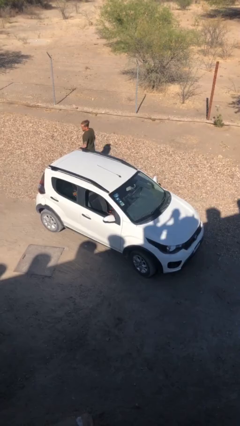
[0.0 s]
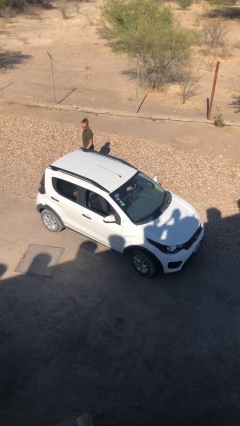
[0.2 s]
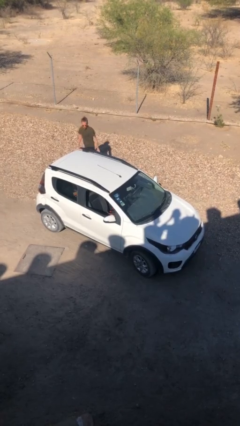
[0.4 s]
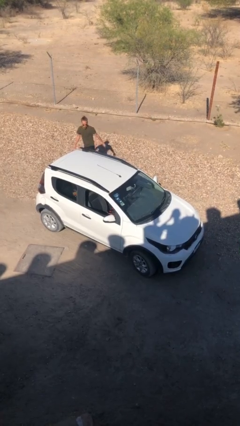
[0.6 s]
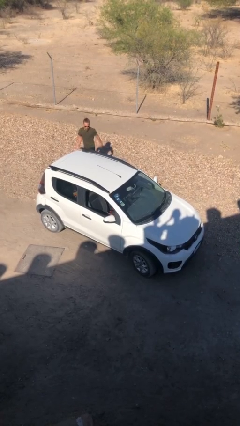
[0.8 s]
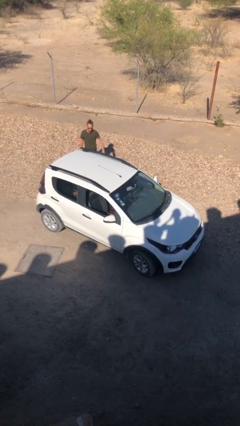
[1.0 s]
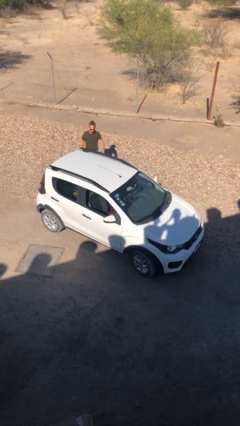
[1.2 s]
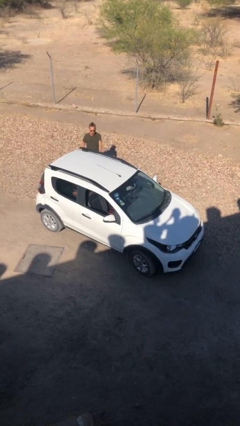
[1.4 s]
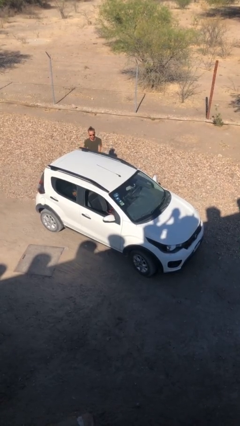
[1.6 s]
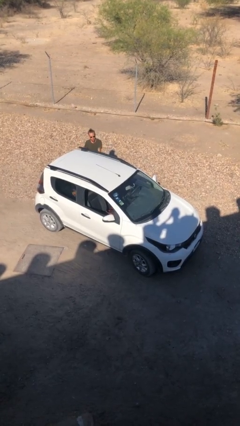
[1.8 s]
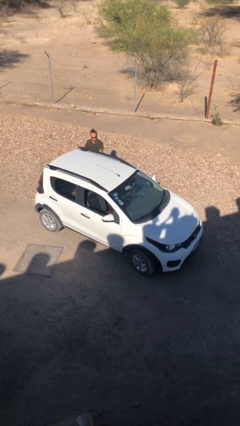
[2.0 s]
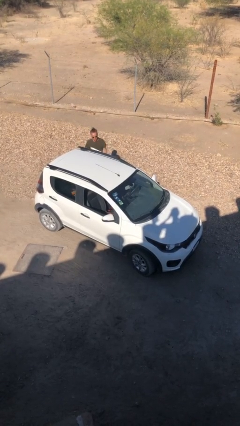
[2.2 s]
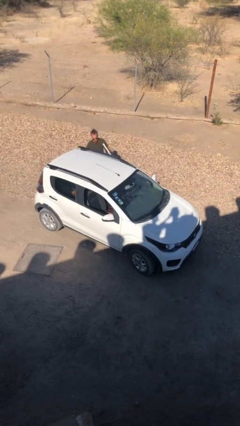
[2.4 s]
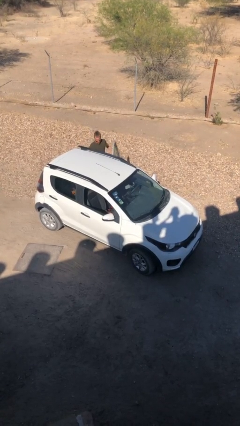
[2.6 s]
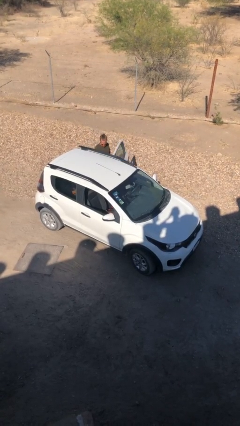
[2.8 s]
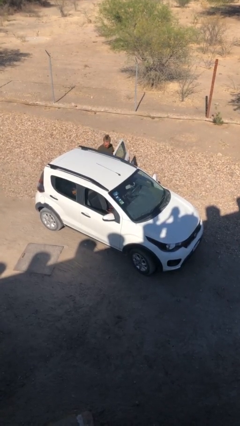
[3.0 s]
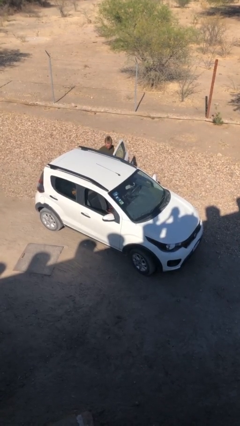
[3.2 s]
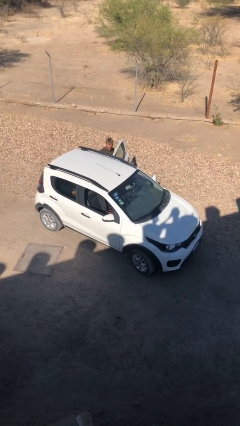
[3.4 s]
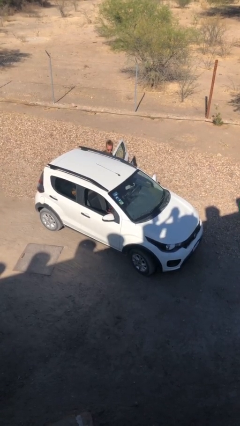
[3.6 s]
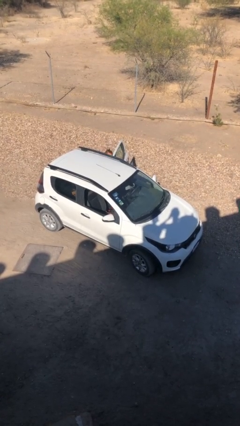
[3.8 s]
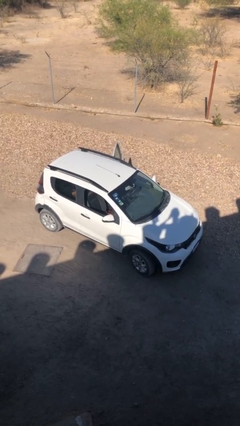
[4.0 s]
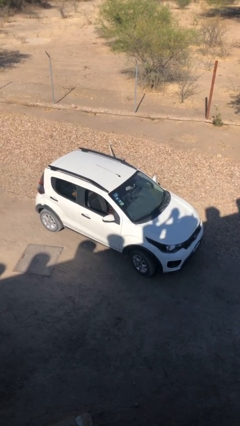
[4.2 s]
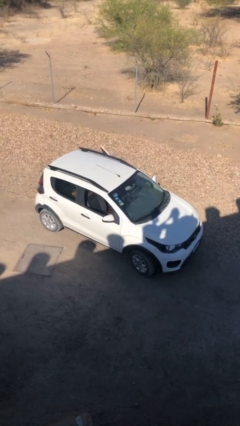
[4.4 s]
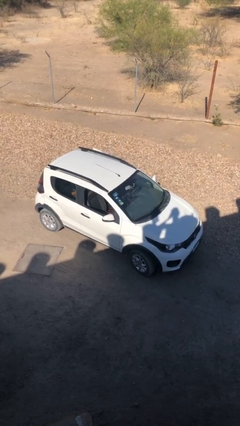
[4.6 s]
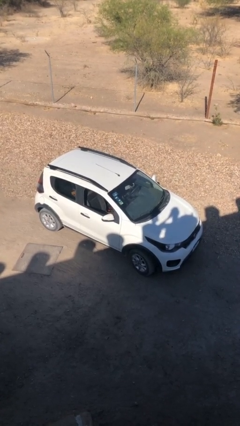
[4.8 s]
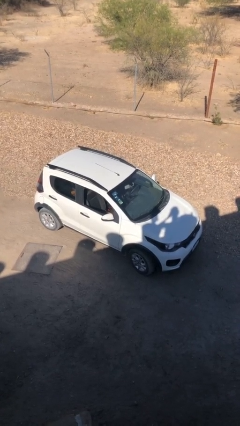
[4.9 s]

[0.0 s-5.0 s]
car picks up person

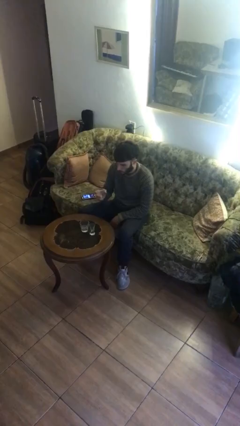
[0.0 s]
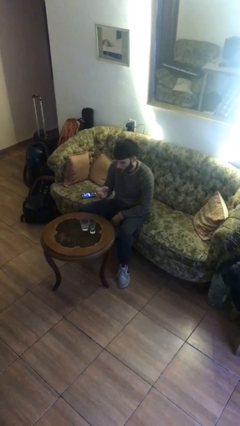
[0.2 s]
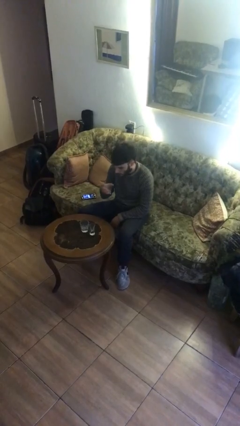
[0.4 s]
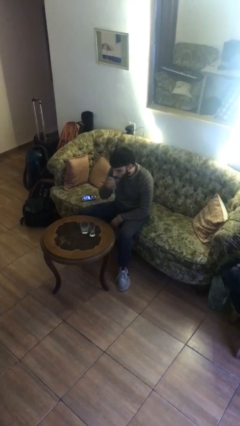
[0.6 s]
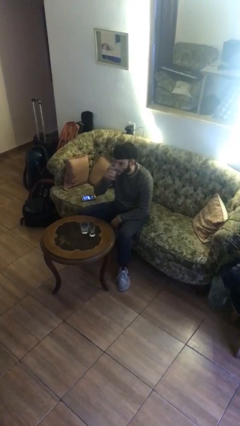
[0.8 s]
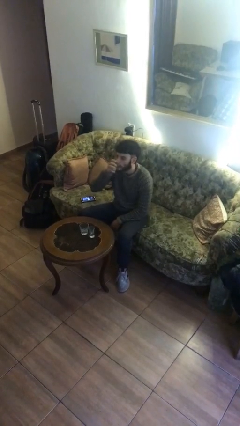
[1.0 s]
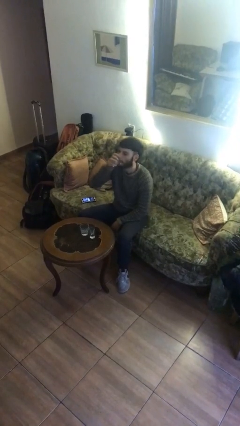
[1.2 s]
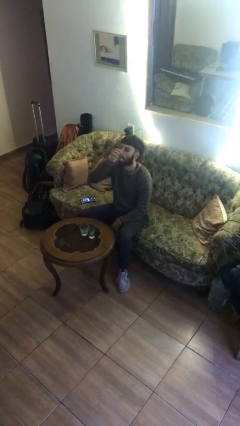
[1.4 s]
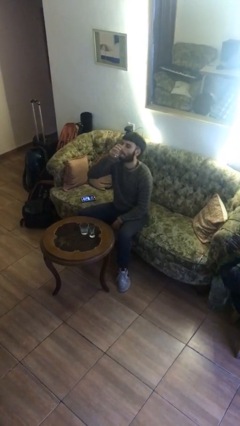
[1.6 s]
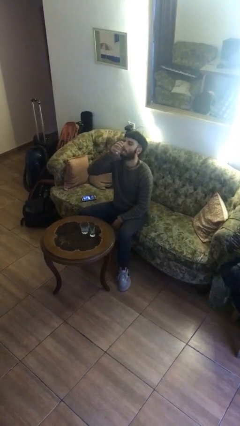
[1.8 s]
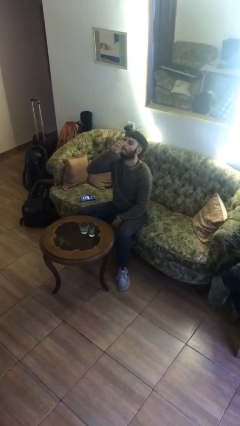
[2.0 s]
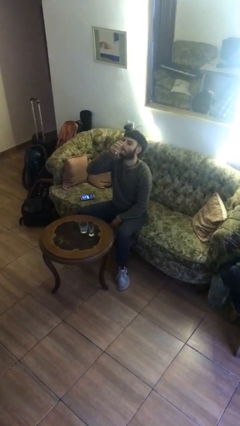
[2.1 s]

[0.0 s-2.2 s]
person drinks from shotglass

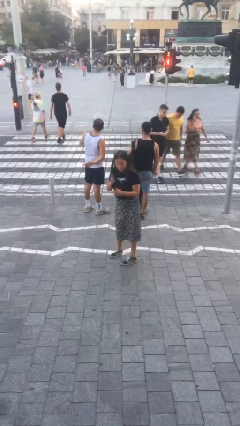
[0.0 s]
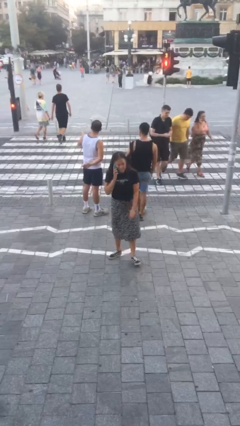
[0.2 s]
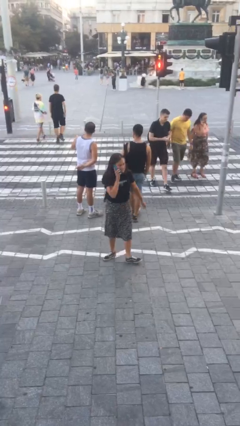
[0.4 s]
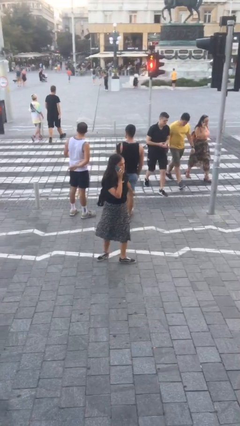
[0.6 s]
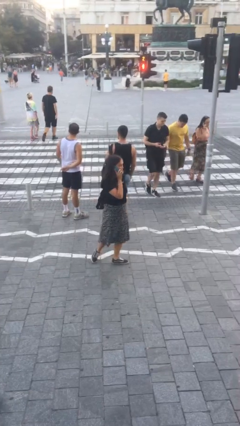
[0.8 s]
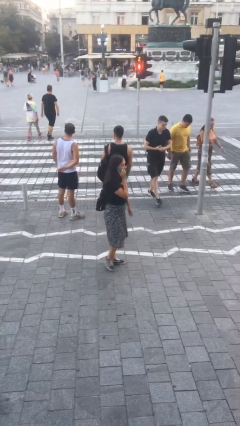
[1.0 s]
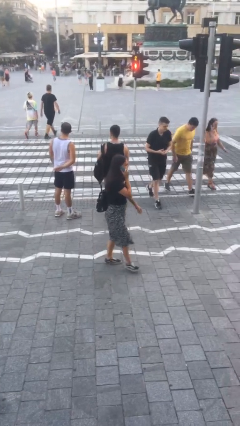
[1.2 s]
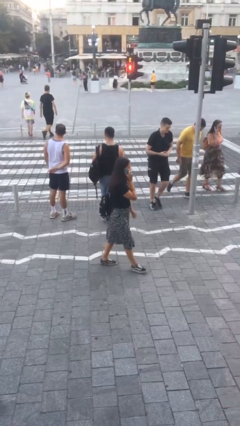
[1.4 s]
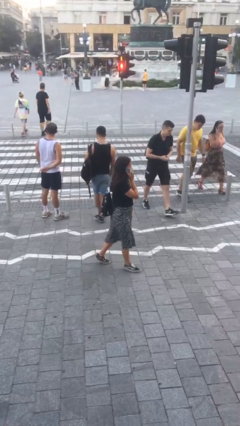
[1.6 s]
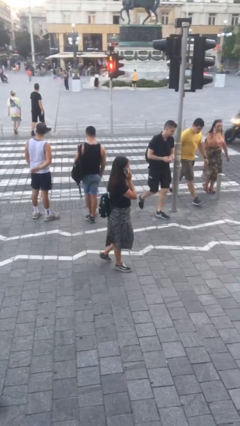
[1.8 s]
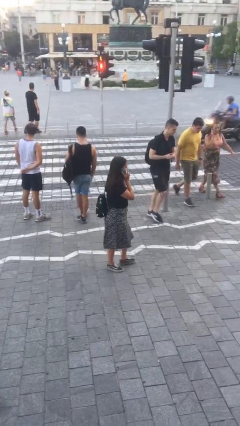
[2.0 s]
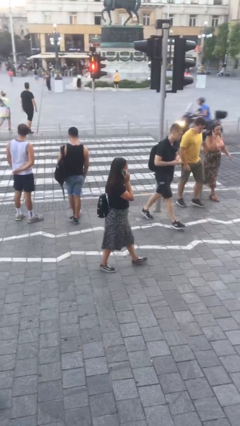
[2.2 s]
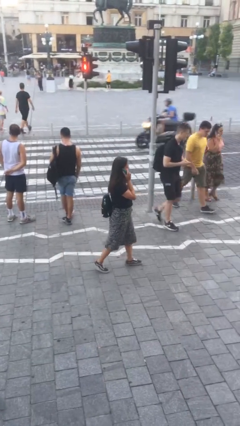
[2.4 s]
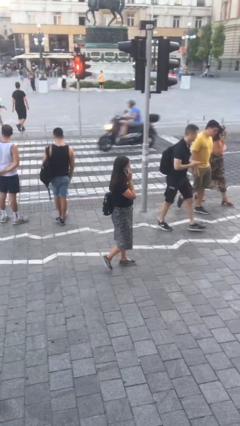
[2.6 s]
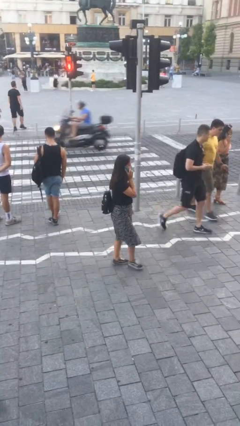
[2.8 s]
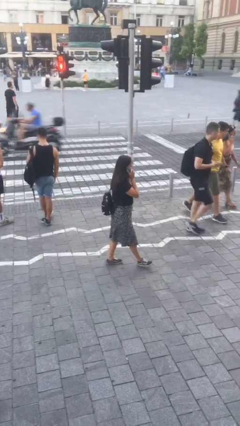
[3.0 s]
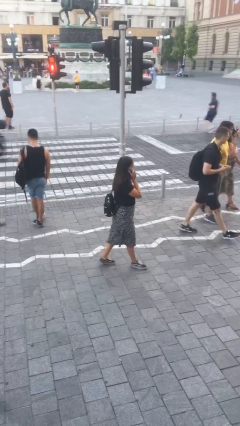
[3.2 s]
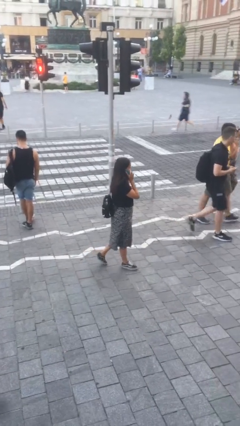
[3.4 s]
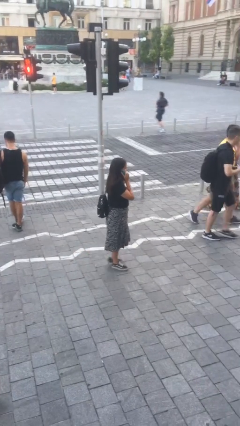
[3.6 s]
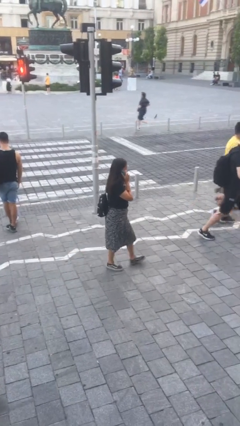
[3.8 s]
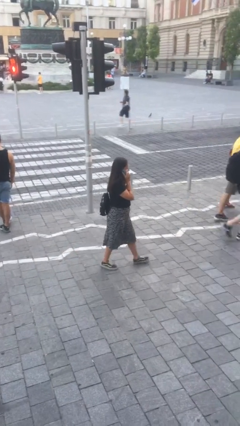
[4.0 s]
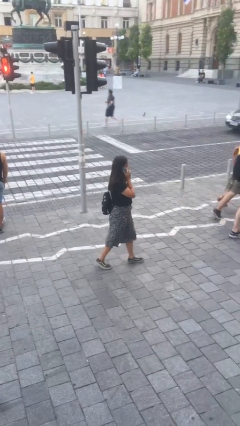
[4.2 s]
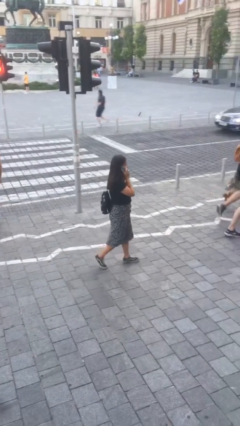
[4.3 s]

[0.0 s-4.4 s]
person talks on phone

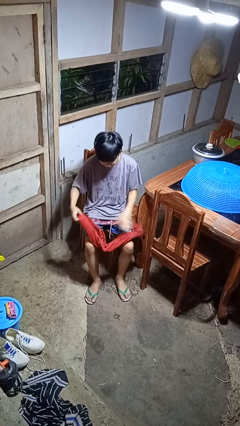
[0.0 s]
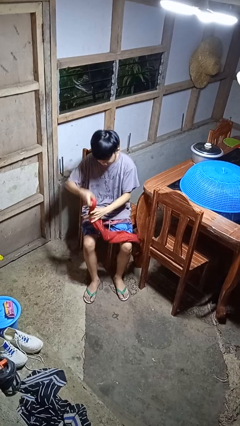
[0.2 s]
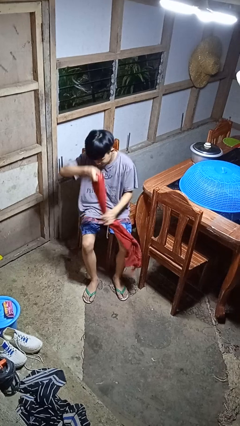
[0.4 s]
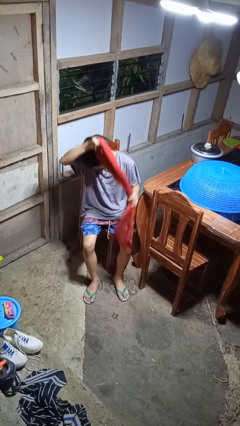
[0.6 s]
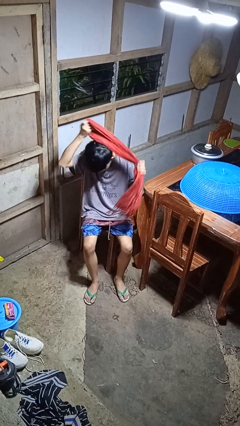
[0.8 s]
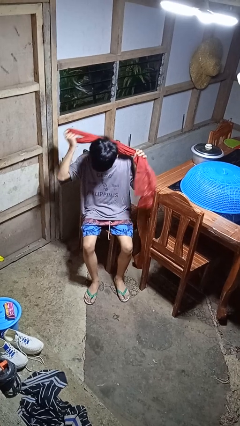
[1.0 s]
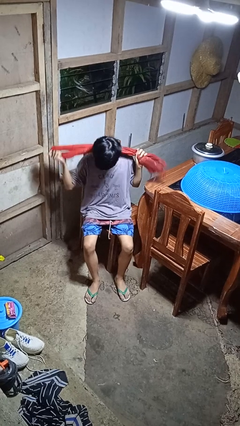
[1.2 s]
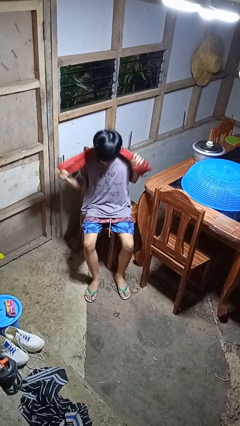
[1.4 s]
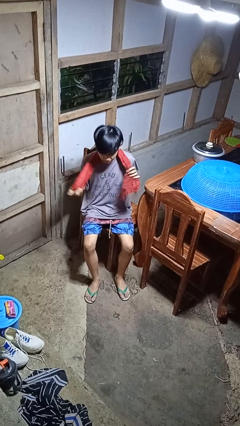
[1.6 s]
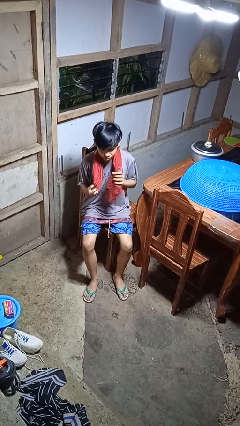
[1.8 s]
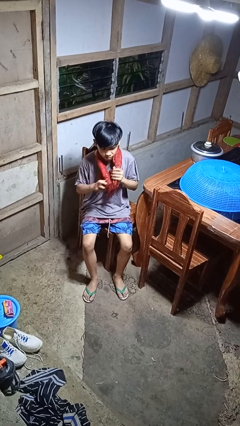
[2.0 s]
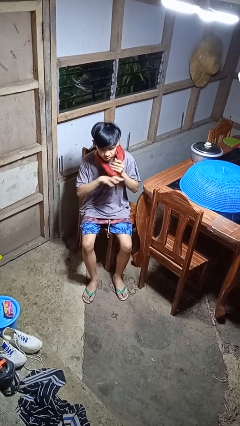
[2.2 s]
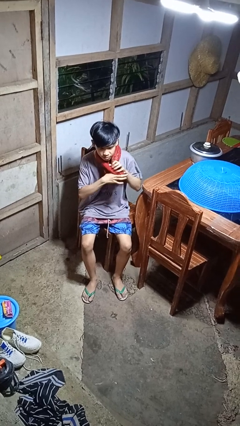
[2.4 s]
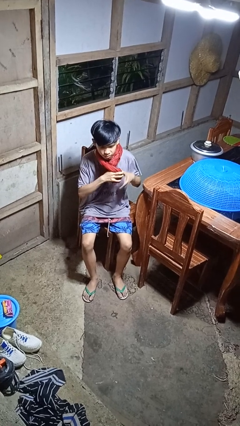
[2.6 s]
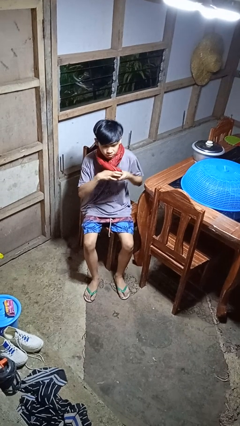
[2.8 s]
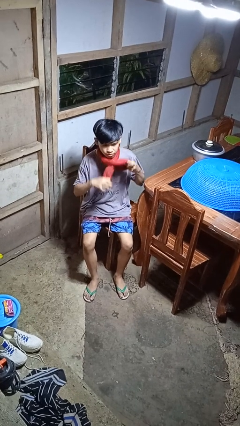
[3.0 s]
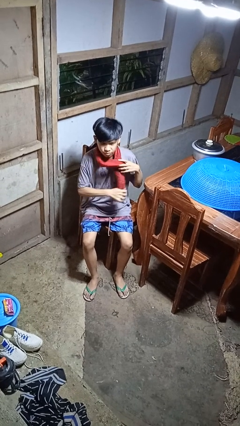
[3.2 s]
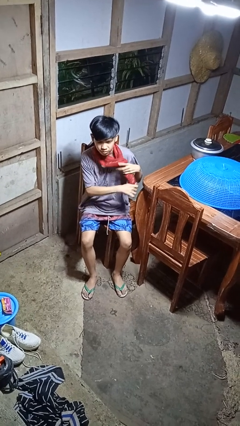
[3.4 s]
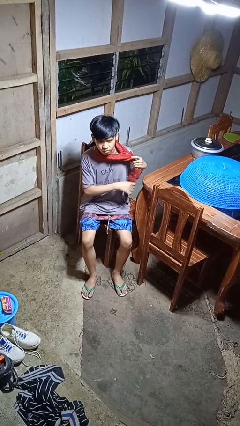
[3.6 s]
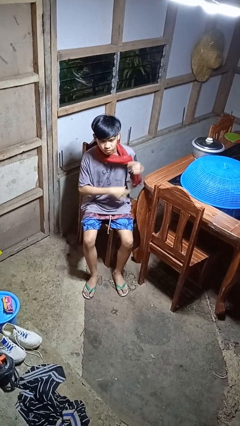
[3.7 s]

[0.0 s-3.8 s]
person puts on scarf

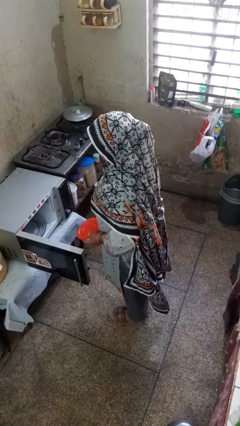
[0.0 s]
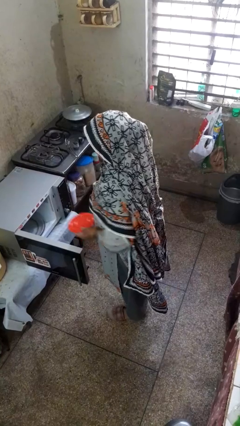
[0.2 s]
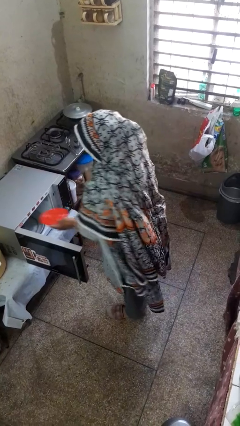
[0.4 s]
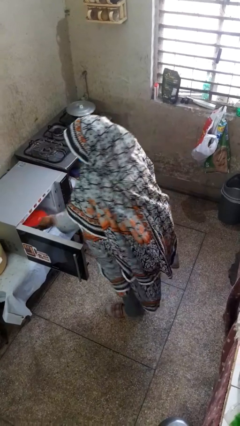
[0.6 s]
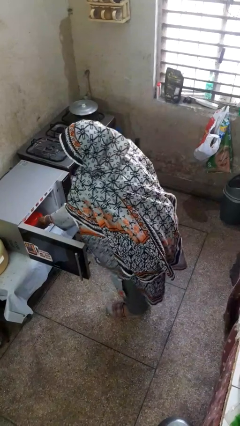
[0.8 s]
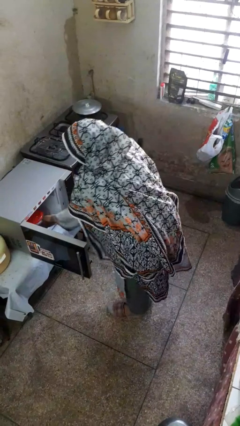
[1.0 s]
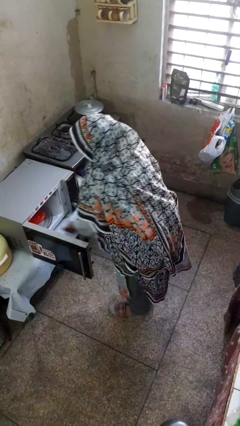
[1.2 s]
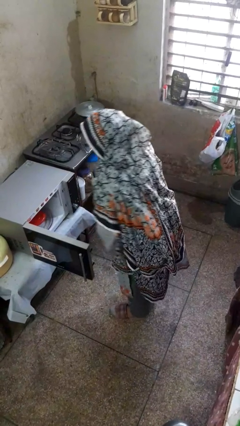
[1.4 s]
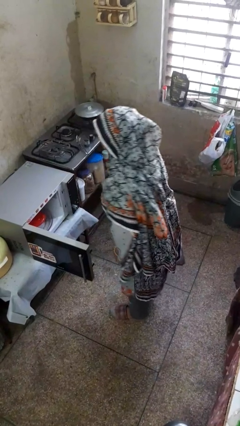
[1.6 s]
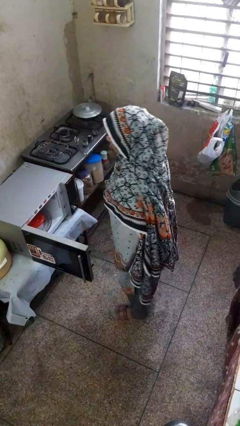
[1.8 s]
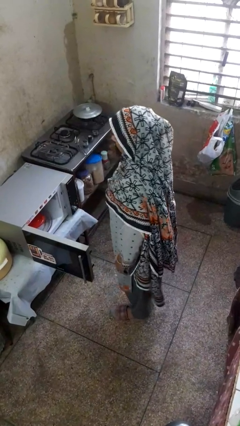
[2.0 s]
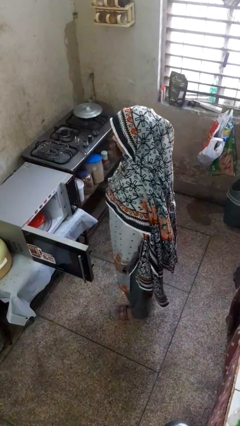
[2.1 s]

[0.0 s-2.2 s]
person puts object into microwave

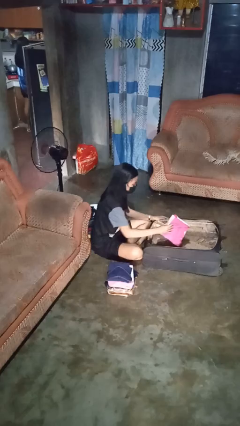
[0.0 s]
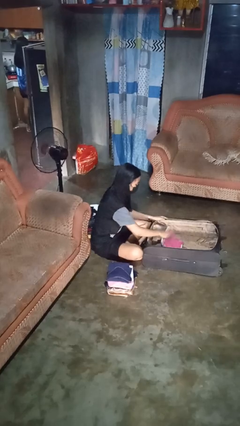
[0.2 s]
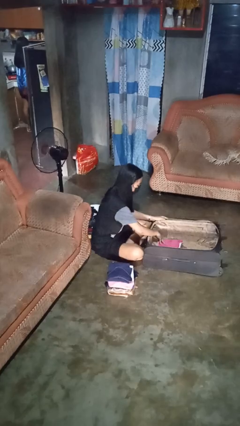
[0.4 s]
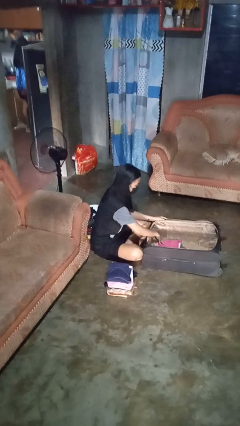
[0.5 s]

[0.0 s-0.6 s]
person loads clothes into suitcase
